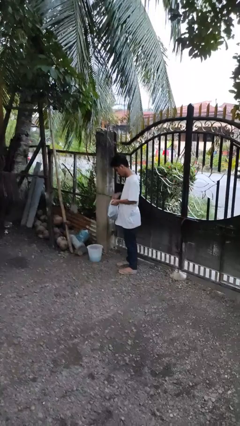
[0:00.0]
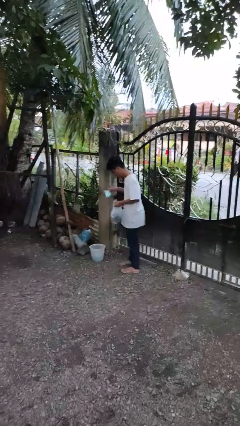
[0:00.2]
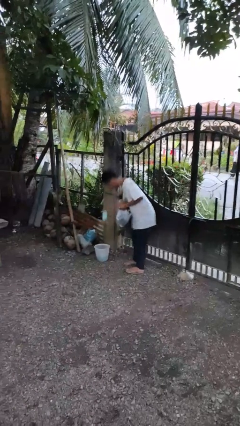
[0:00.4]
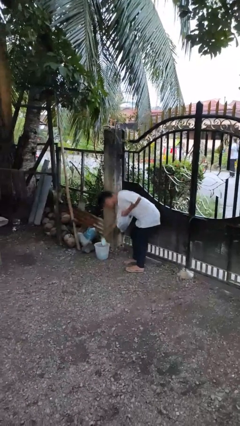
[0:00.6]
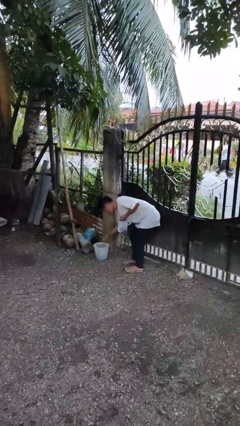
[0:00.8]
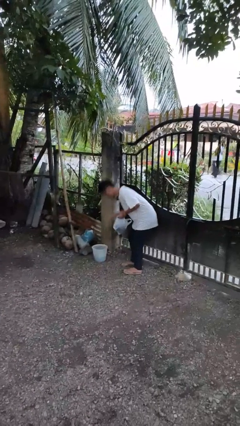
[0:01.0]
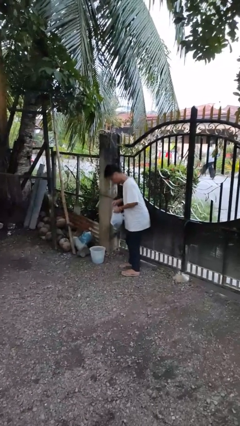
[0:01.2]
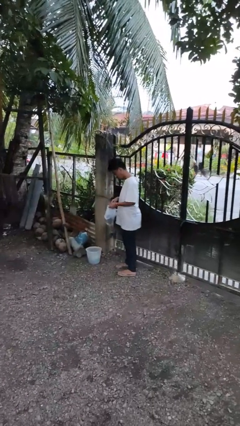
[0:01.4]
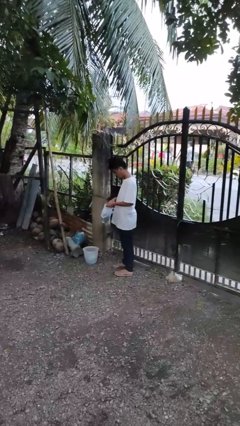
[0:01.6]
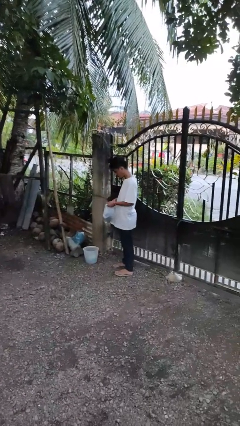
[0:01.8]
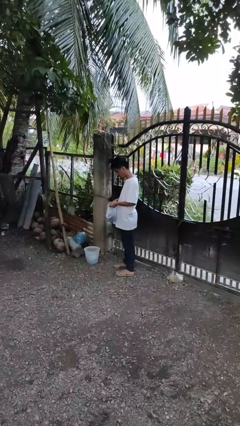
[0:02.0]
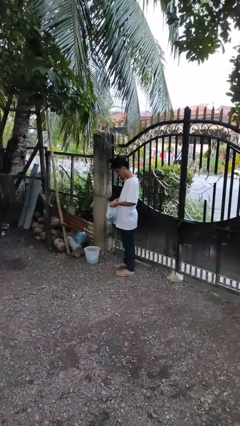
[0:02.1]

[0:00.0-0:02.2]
person discards trash

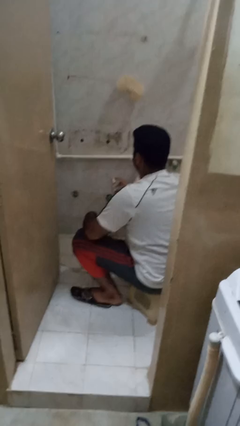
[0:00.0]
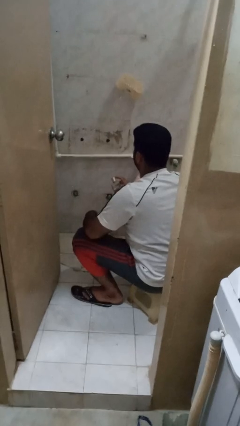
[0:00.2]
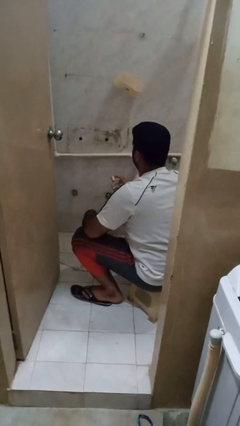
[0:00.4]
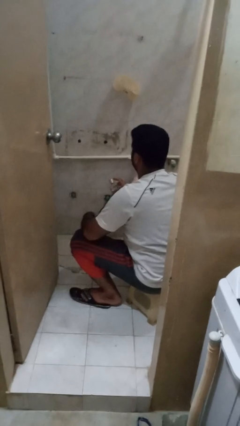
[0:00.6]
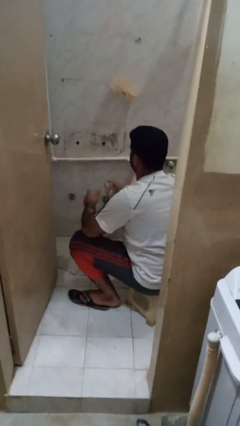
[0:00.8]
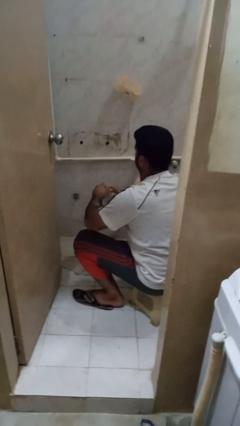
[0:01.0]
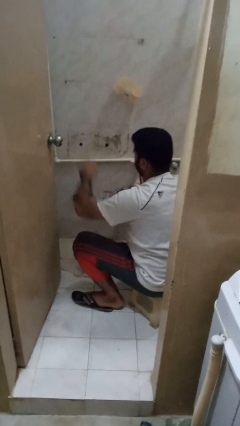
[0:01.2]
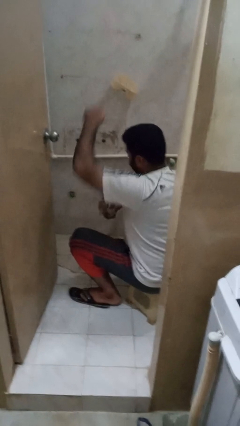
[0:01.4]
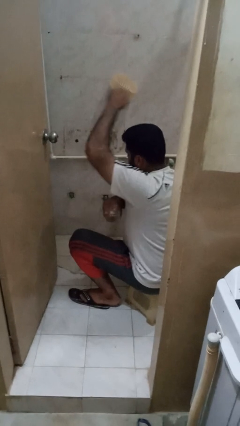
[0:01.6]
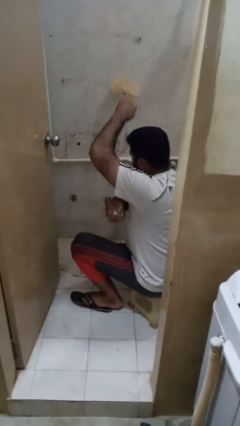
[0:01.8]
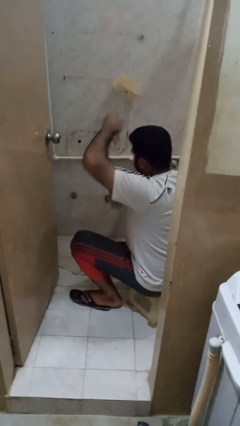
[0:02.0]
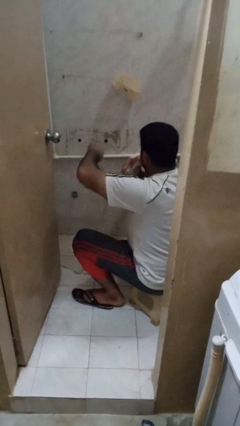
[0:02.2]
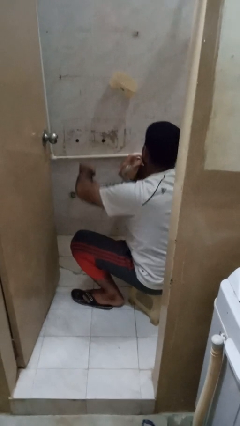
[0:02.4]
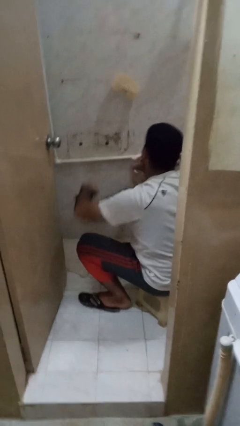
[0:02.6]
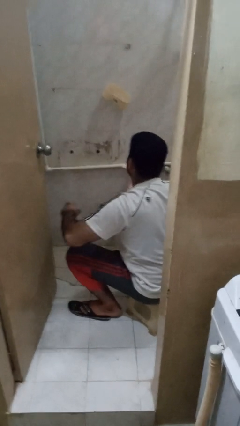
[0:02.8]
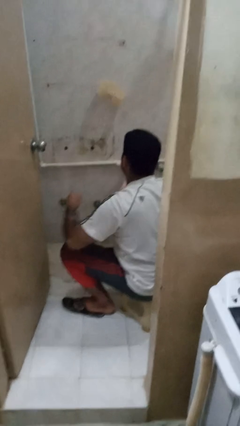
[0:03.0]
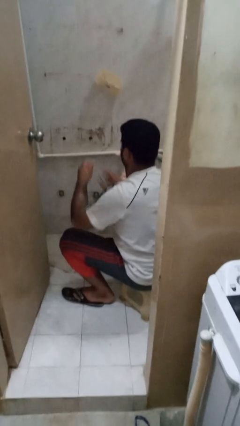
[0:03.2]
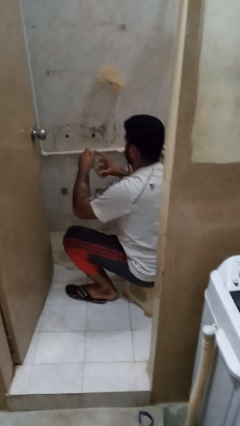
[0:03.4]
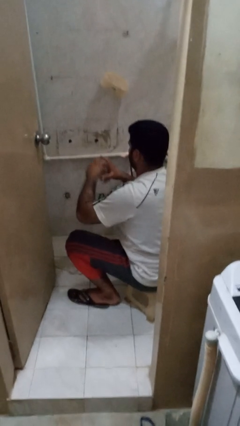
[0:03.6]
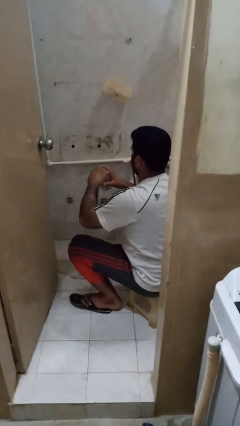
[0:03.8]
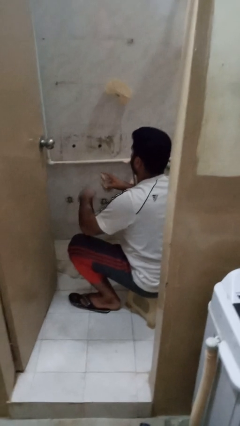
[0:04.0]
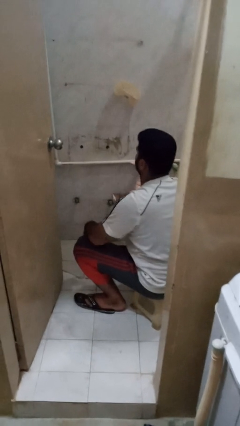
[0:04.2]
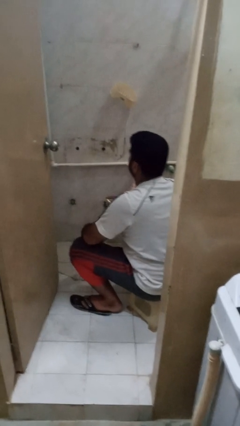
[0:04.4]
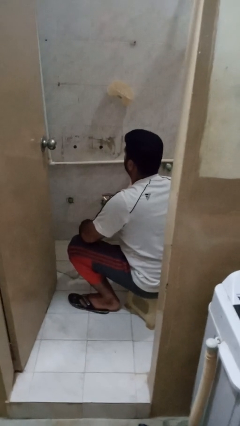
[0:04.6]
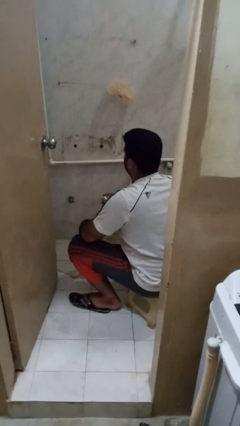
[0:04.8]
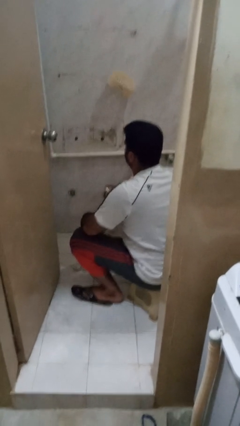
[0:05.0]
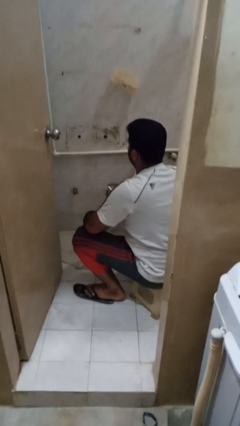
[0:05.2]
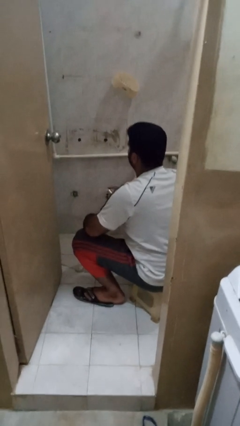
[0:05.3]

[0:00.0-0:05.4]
person applies deodorant

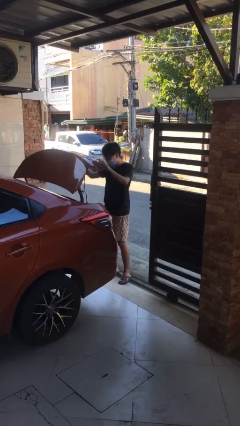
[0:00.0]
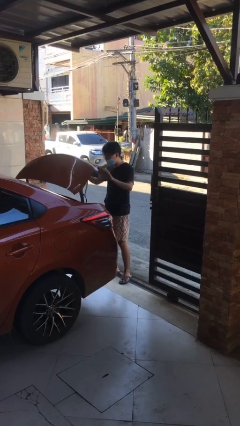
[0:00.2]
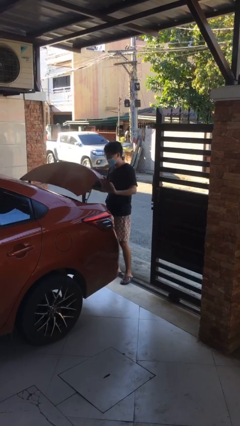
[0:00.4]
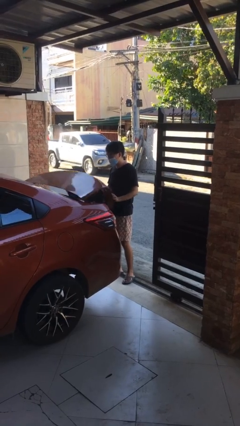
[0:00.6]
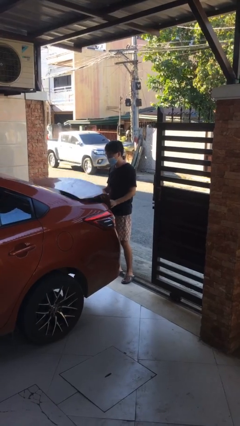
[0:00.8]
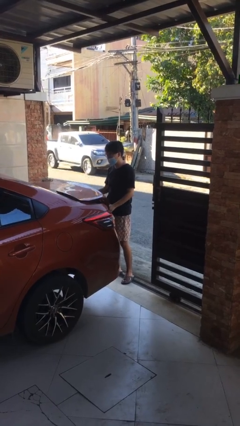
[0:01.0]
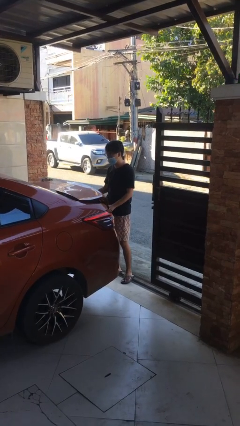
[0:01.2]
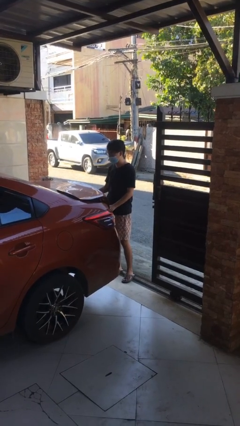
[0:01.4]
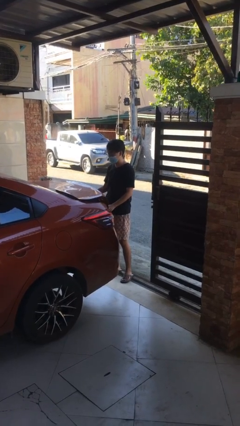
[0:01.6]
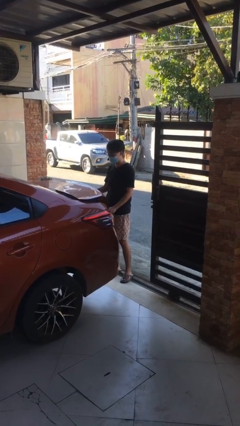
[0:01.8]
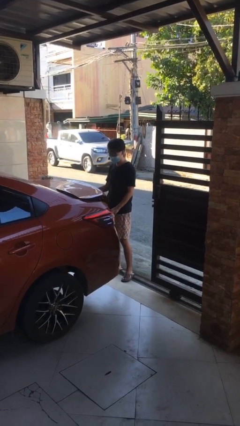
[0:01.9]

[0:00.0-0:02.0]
person closes car trunk

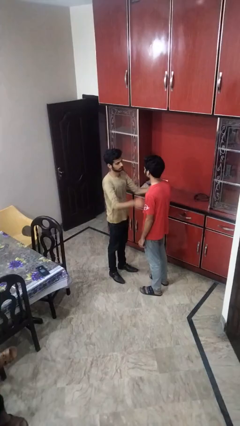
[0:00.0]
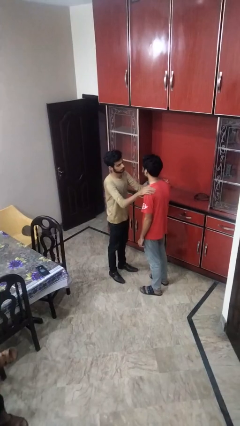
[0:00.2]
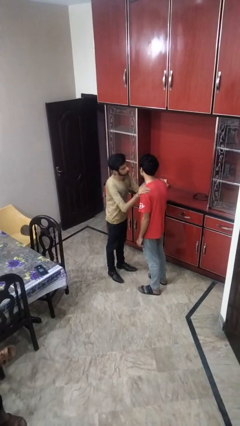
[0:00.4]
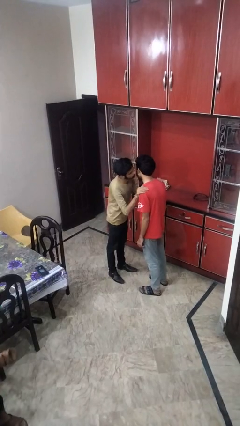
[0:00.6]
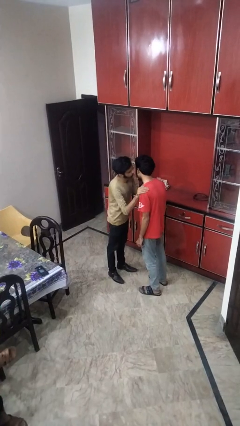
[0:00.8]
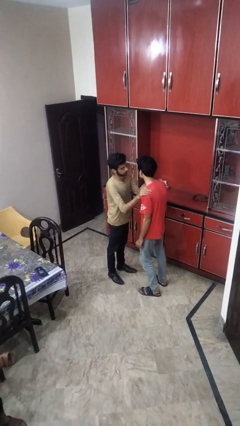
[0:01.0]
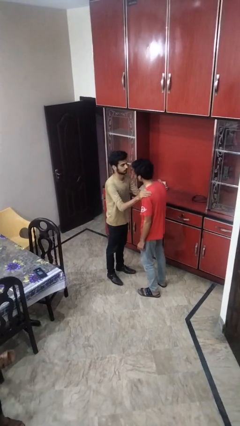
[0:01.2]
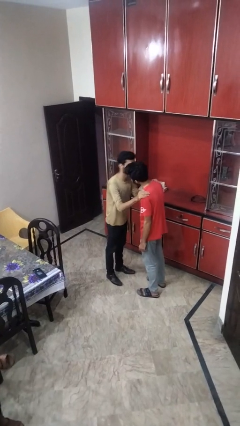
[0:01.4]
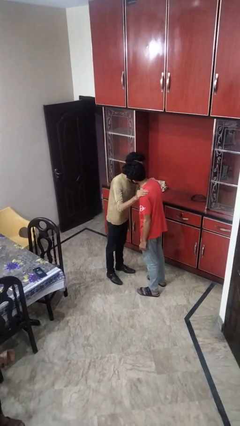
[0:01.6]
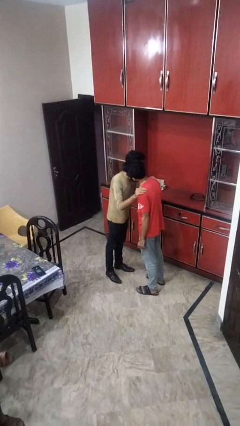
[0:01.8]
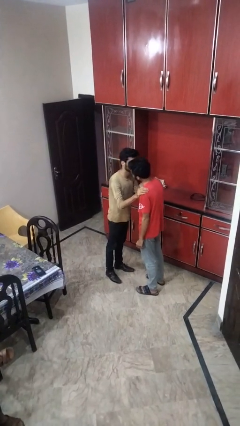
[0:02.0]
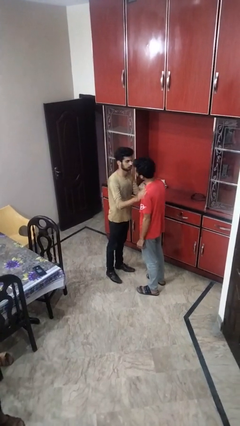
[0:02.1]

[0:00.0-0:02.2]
person shoves person

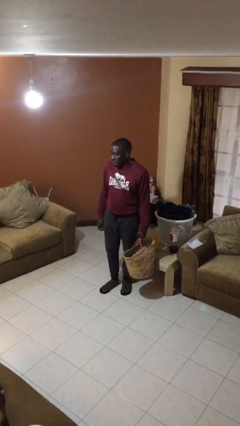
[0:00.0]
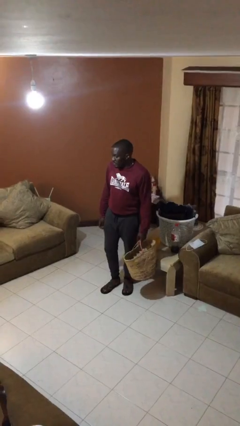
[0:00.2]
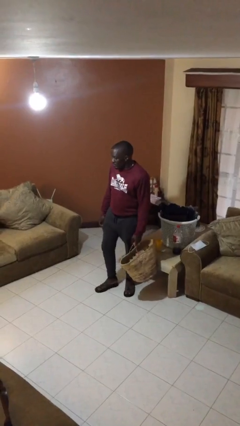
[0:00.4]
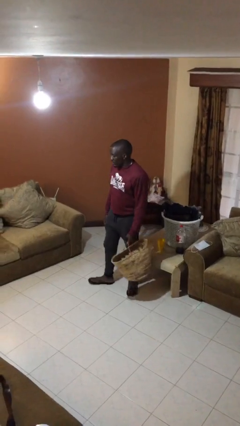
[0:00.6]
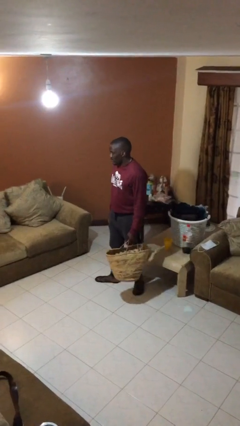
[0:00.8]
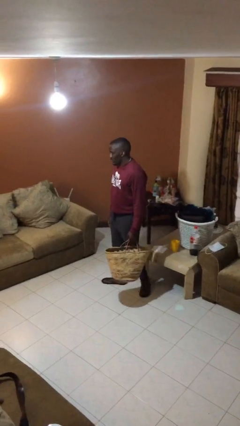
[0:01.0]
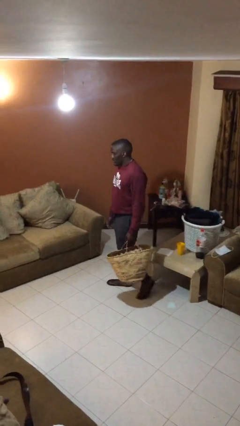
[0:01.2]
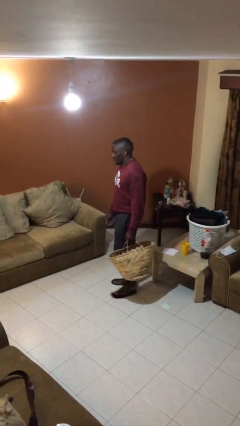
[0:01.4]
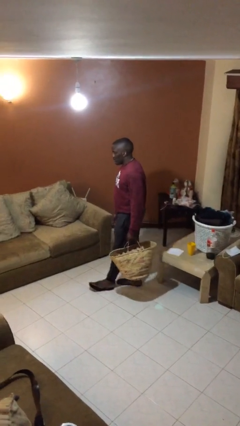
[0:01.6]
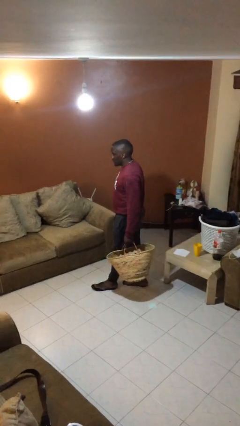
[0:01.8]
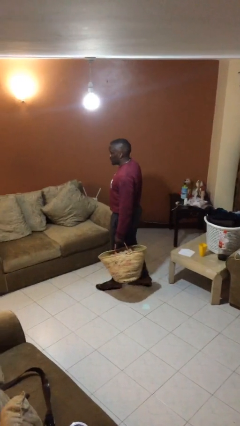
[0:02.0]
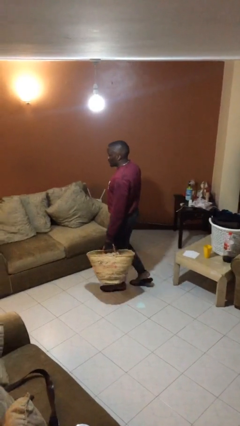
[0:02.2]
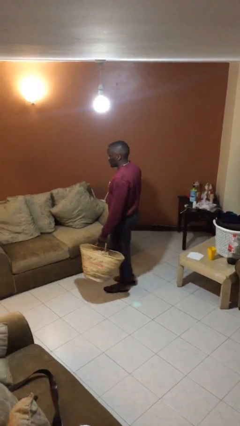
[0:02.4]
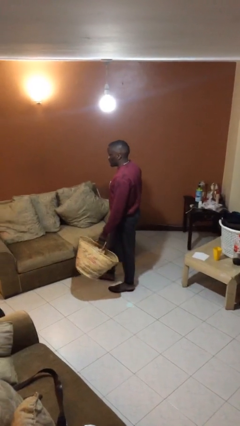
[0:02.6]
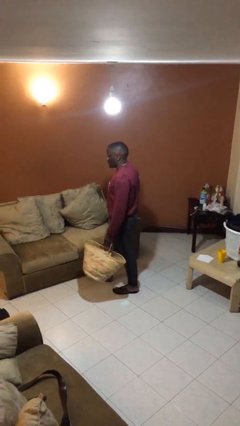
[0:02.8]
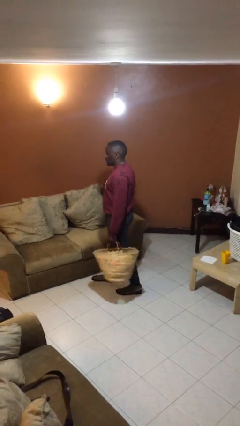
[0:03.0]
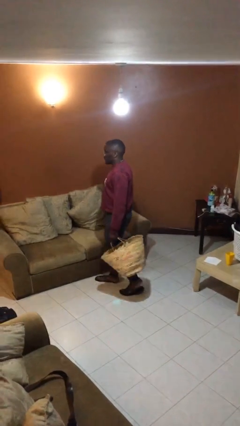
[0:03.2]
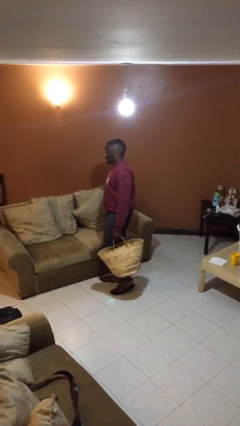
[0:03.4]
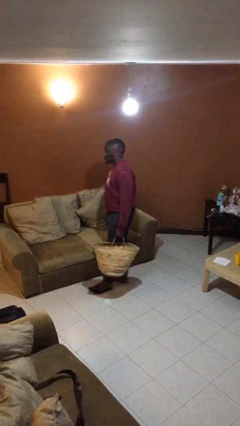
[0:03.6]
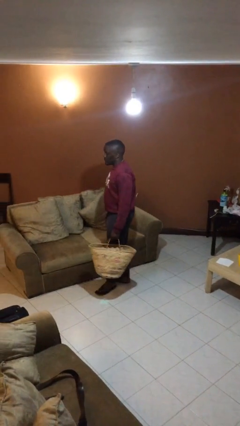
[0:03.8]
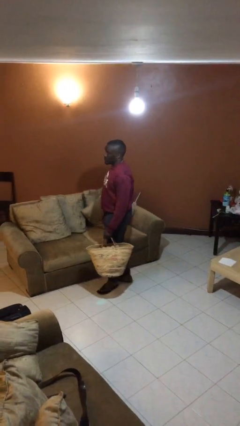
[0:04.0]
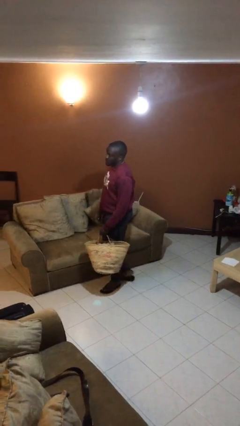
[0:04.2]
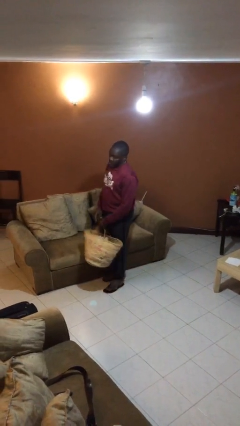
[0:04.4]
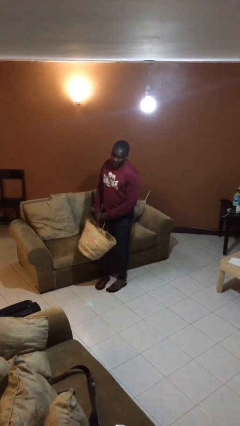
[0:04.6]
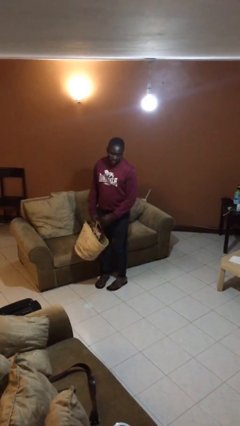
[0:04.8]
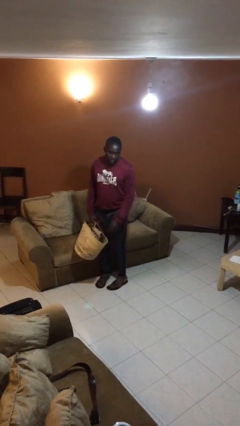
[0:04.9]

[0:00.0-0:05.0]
person carries groceries

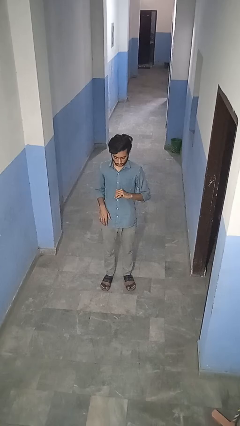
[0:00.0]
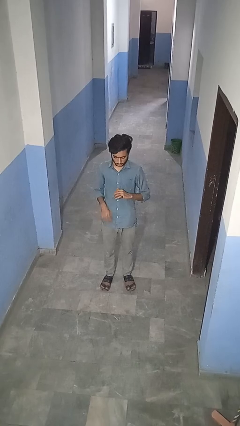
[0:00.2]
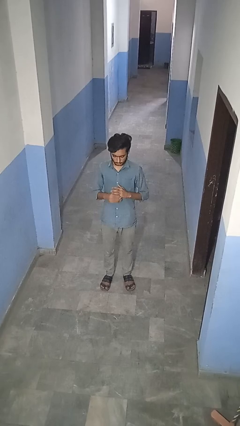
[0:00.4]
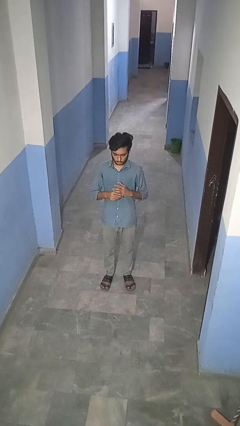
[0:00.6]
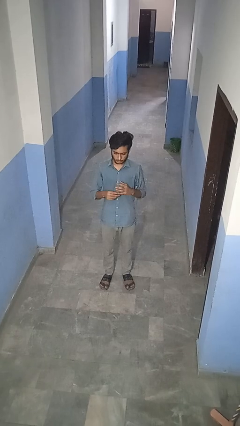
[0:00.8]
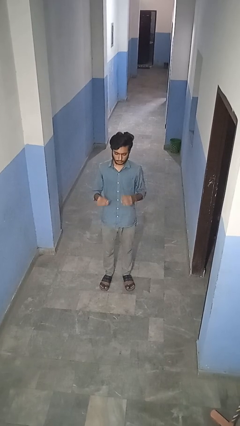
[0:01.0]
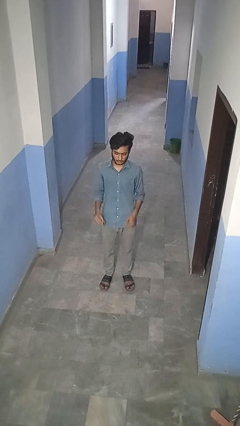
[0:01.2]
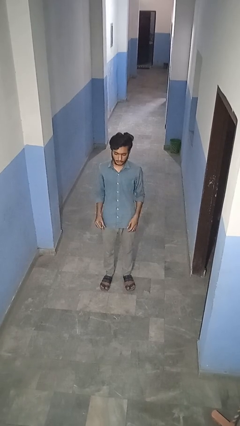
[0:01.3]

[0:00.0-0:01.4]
person takes off ring
